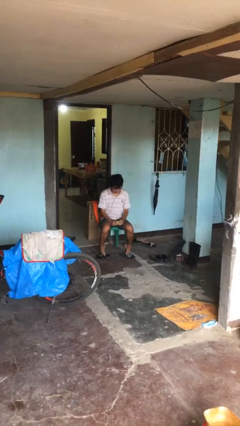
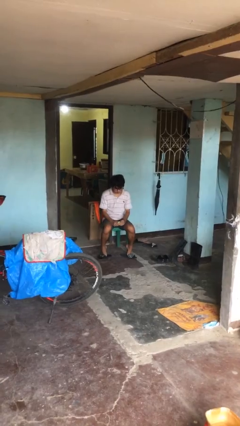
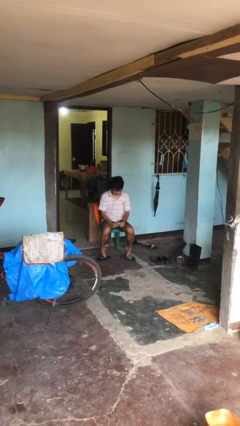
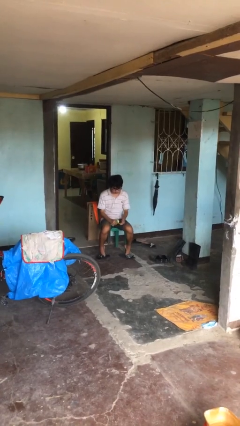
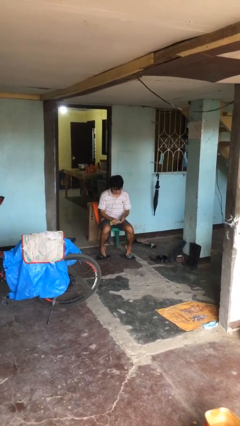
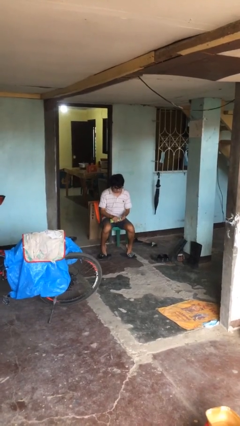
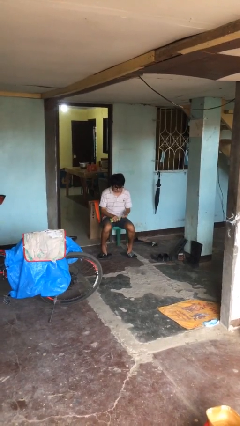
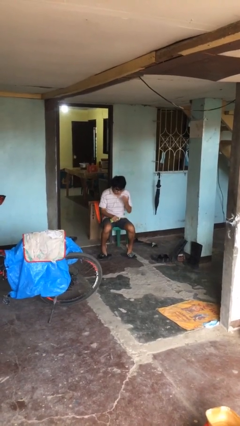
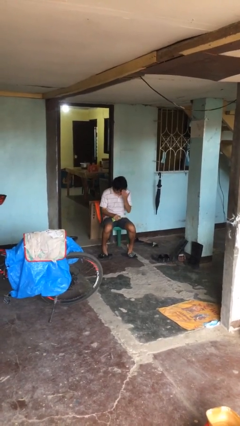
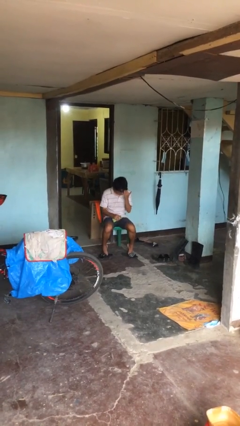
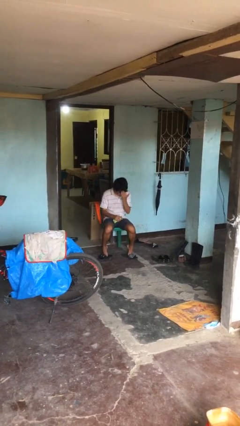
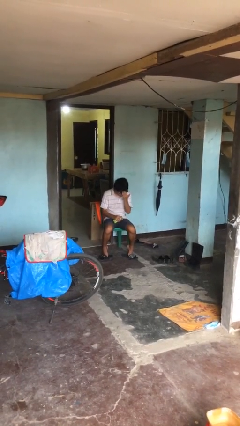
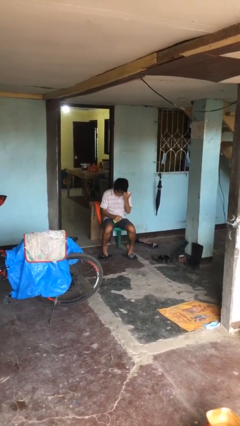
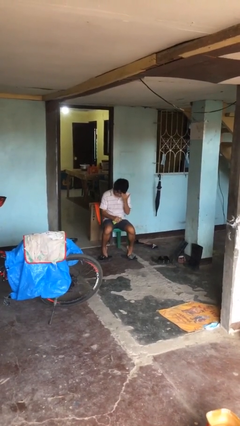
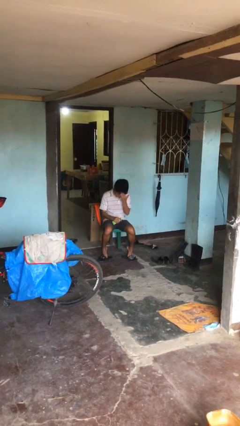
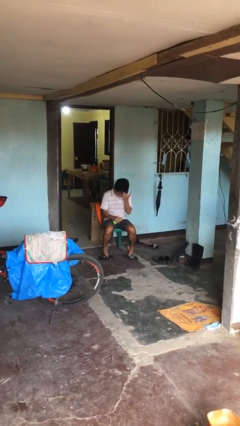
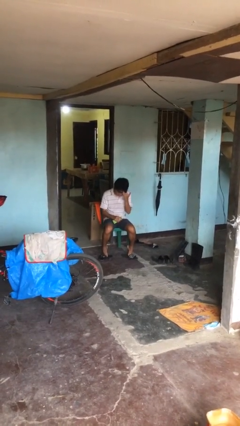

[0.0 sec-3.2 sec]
person applies facial moisturizer

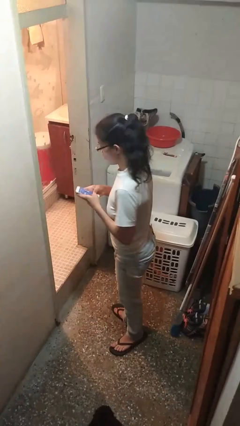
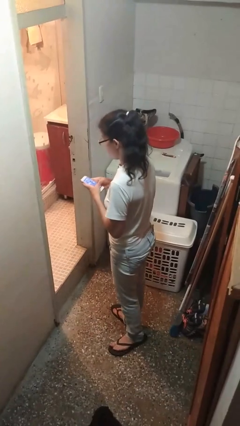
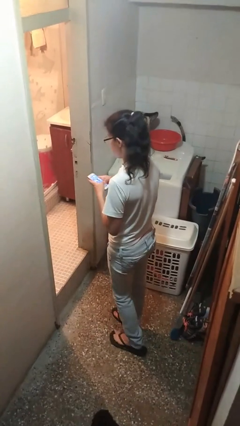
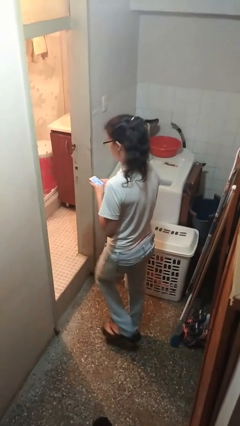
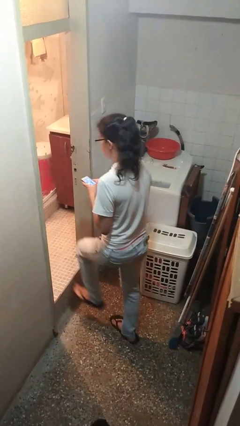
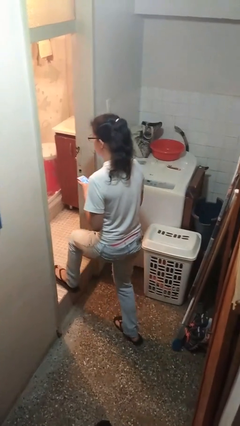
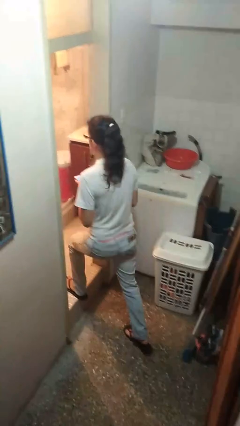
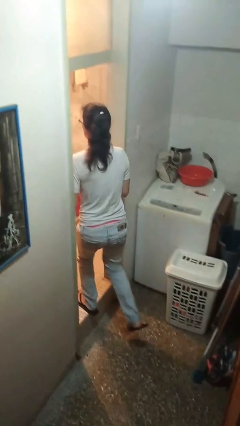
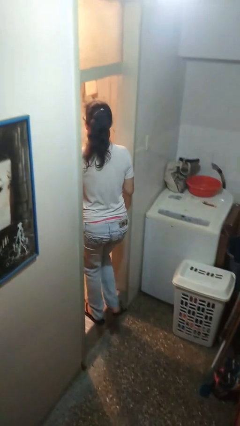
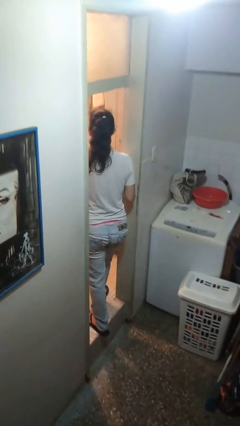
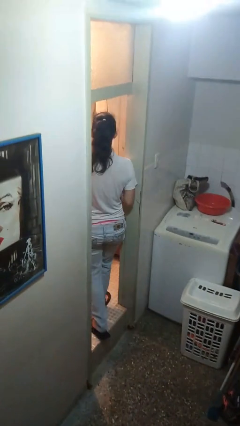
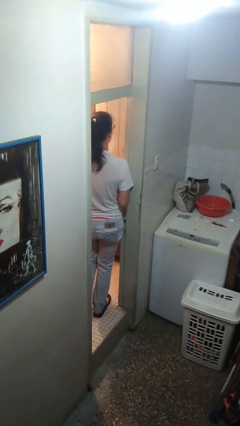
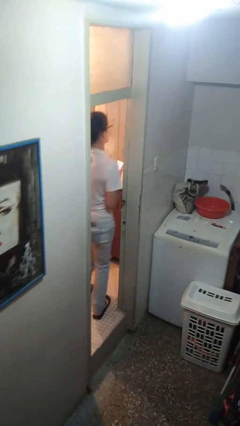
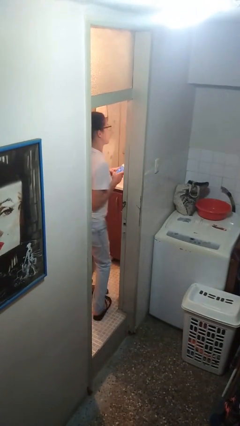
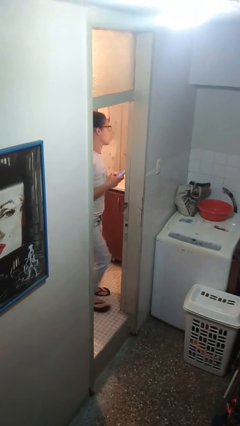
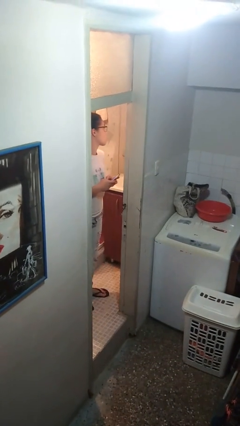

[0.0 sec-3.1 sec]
person exits scene through structure

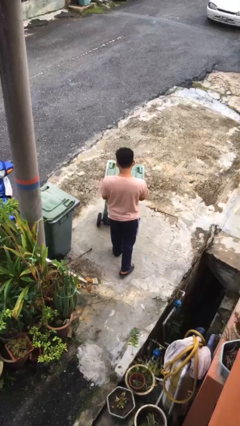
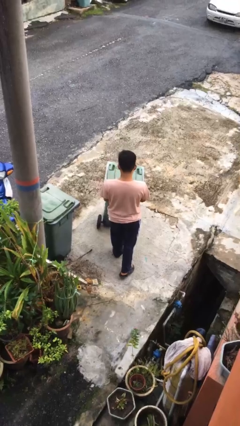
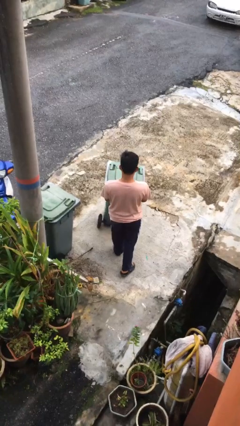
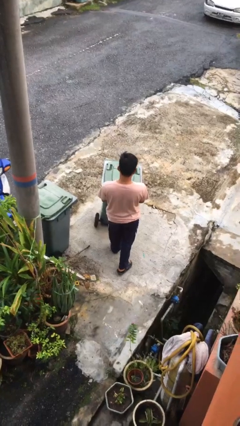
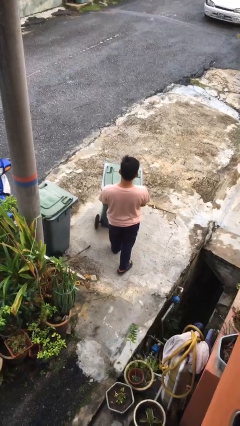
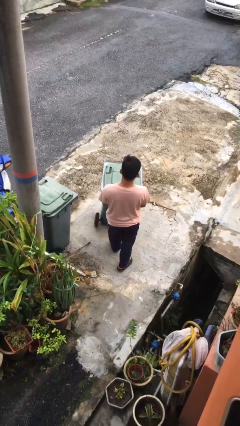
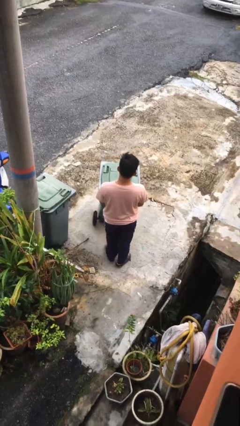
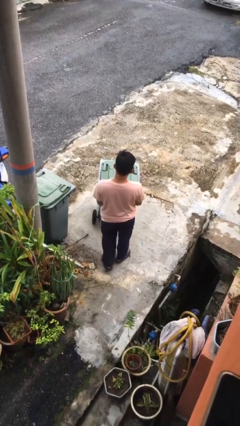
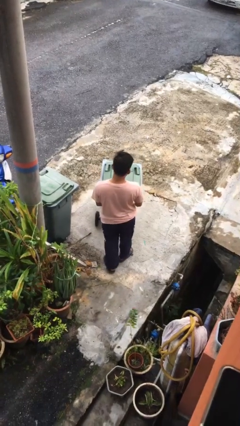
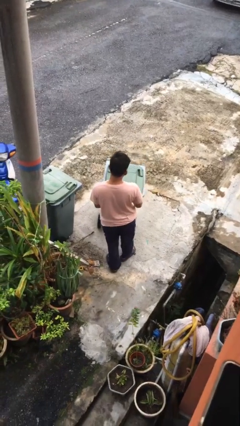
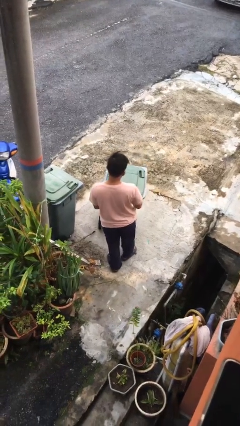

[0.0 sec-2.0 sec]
person pulls wheeled trashcan

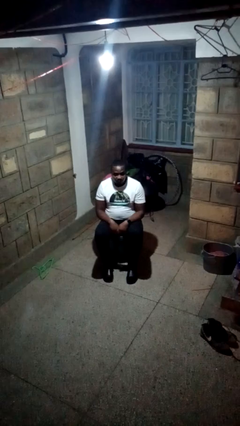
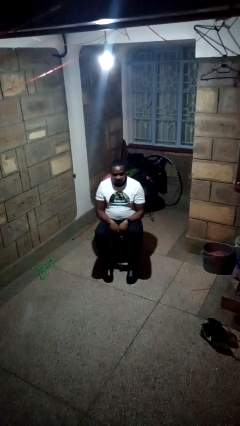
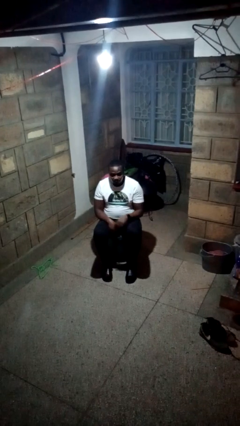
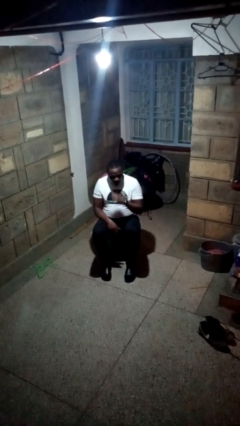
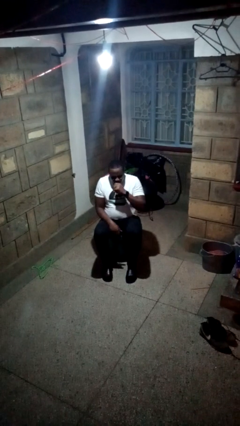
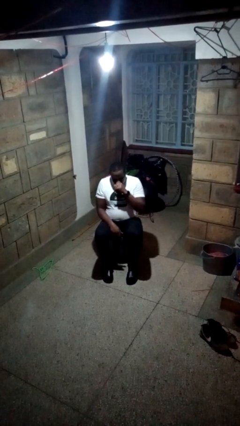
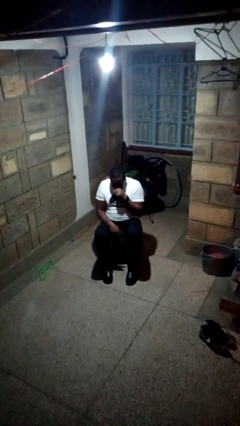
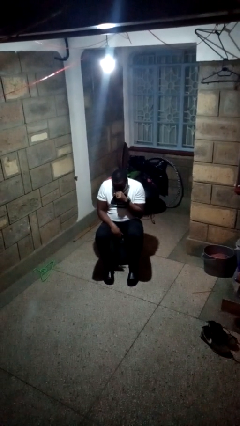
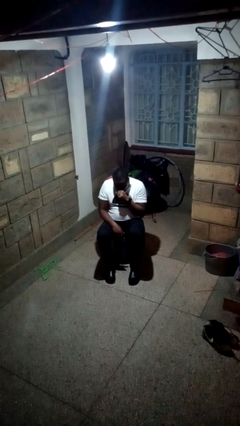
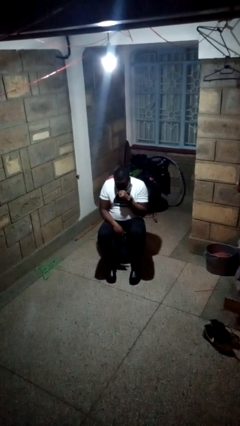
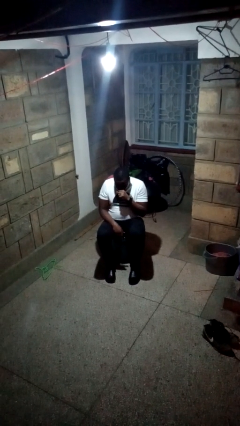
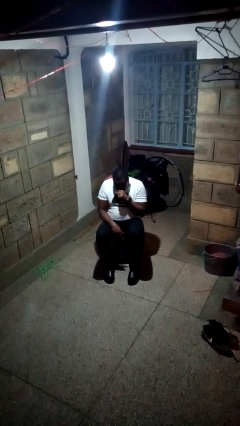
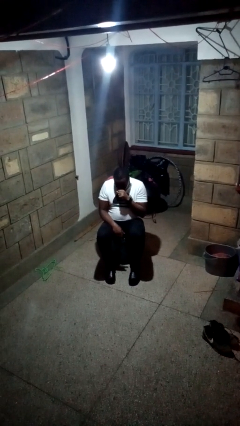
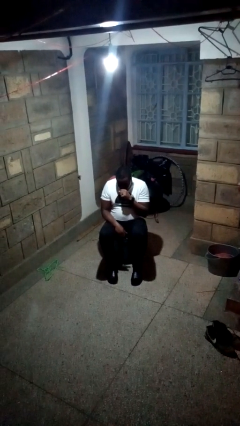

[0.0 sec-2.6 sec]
person sneezes into hand

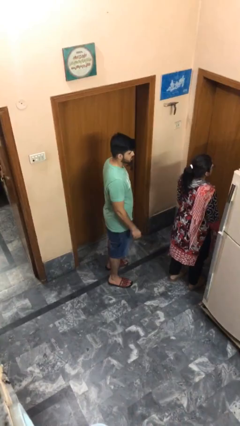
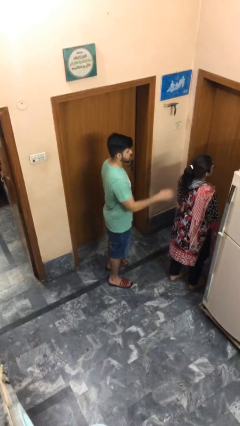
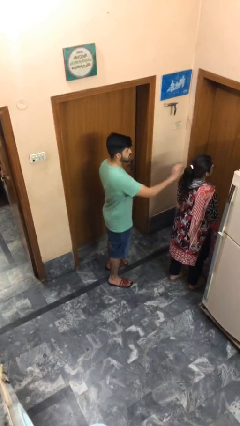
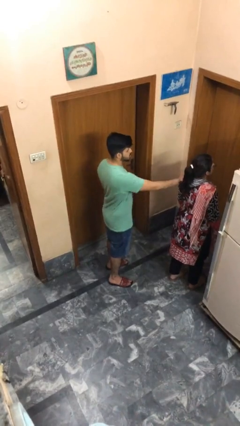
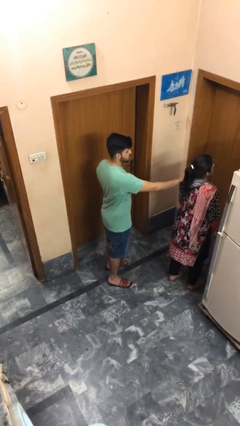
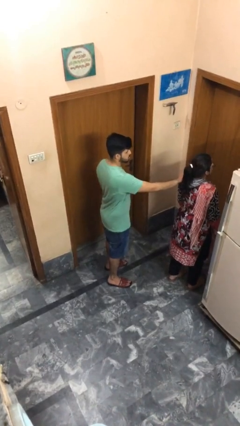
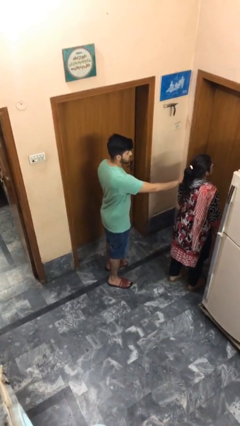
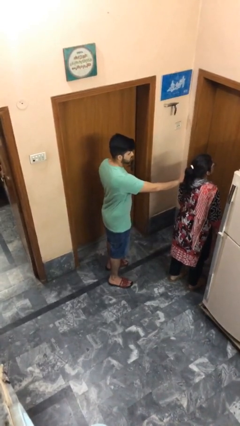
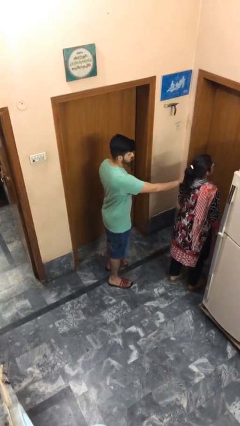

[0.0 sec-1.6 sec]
person grabs person by shoulder

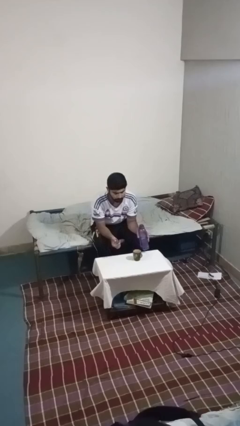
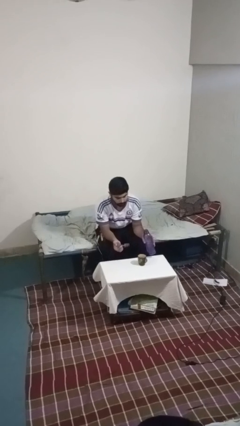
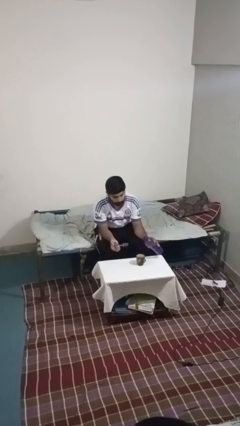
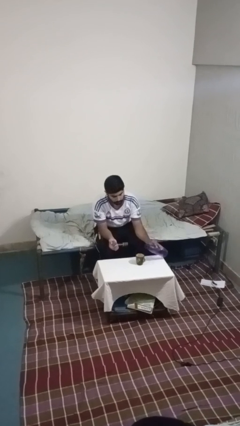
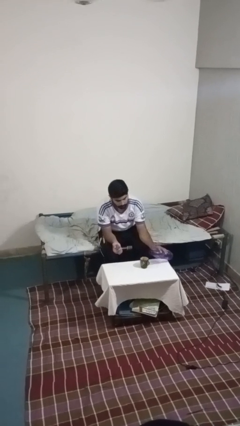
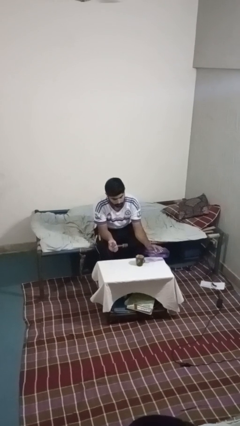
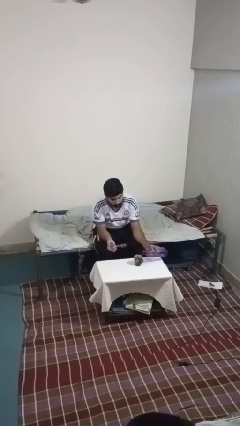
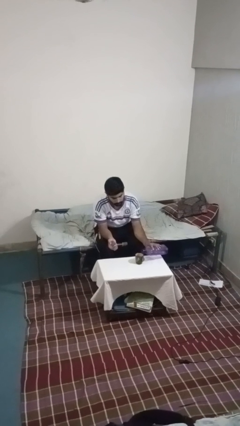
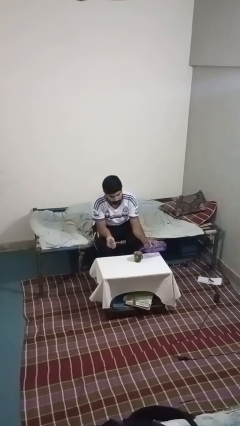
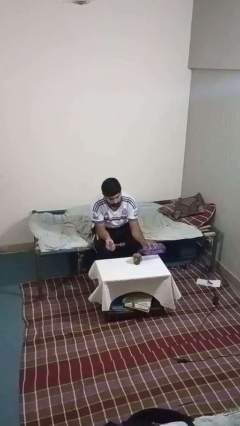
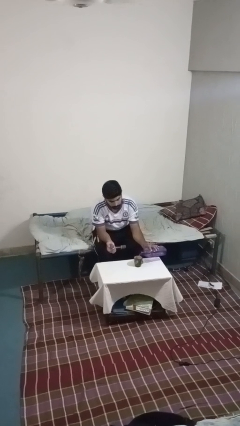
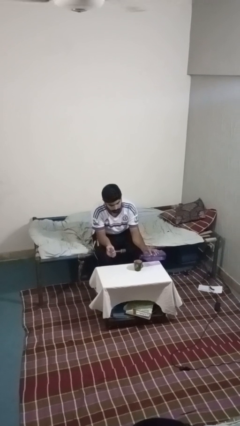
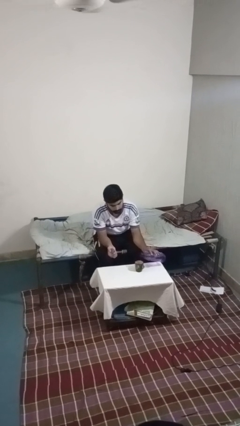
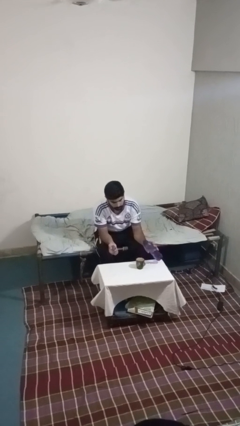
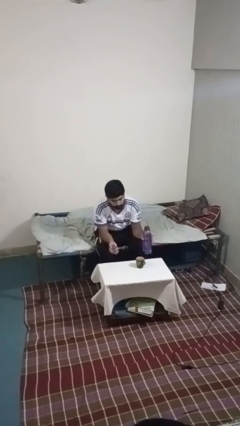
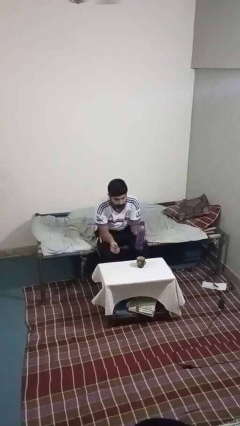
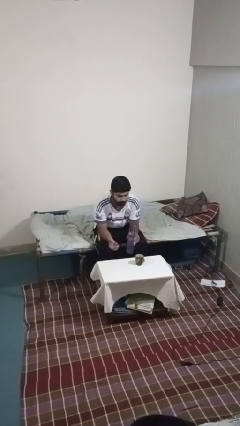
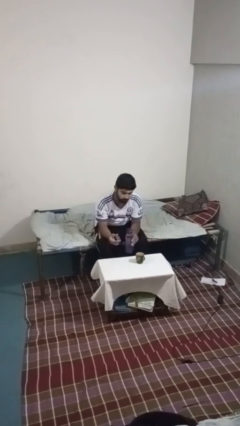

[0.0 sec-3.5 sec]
person pours liquid into cup

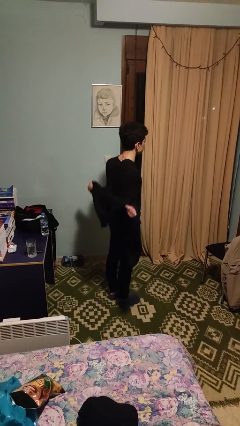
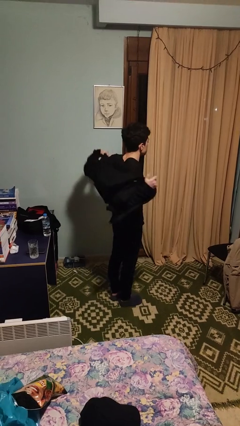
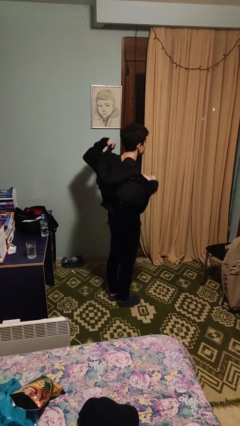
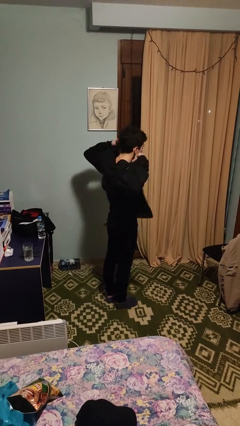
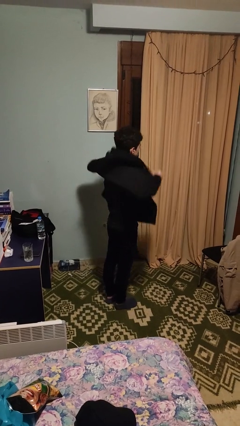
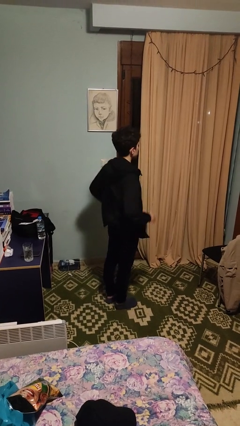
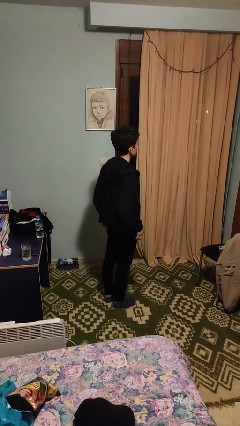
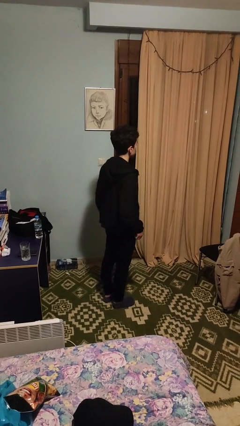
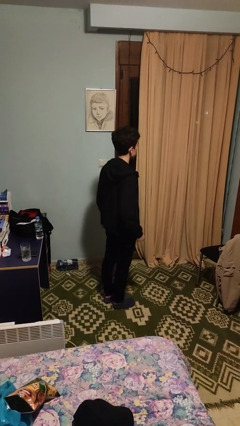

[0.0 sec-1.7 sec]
person puts on jacket
